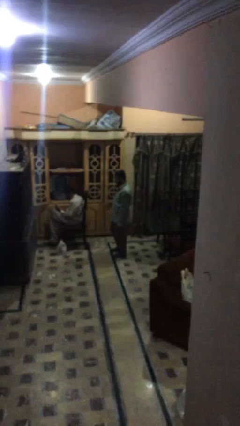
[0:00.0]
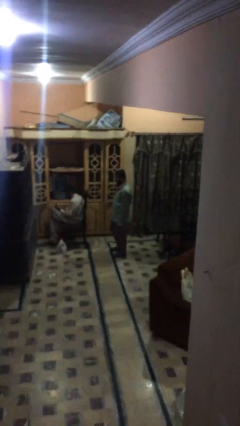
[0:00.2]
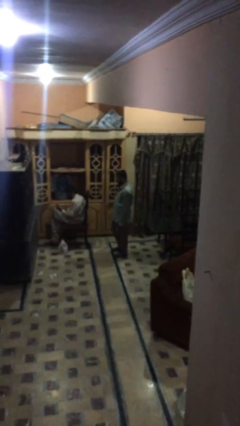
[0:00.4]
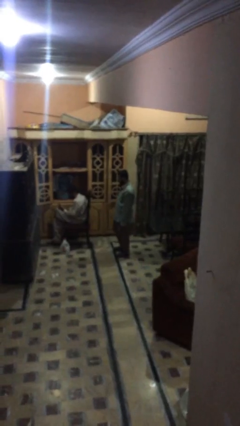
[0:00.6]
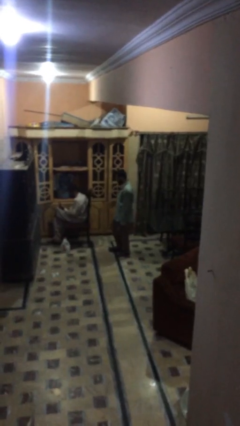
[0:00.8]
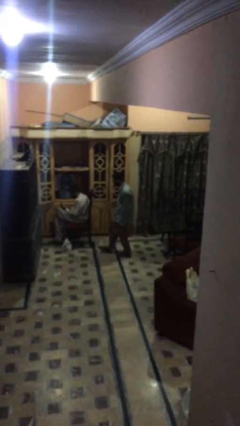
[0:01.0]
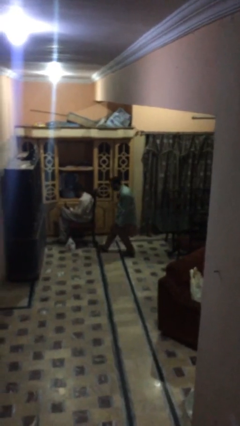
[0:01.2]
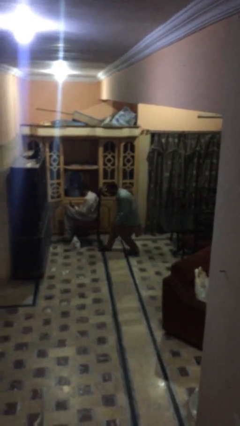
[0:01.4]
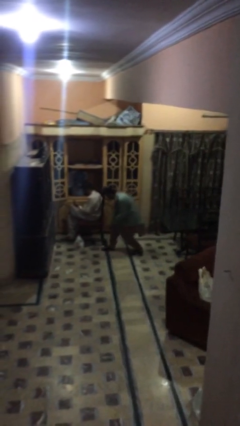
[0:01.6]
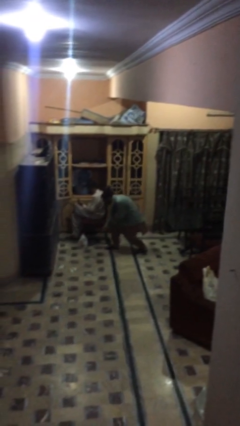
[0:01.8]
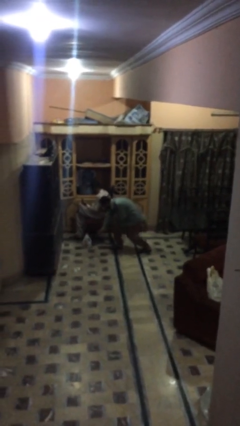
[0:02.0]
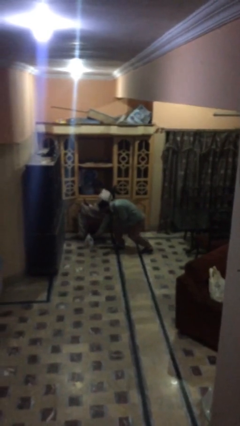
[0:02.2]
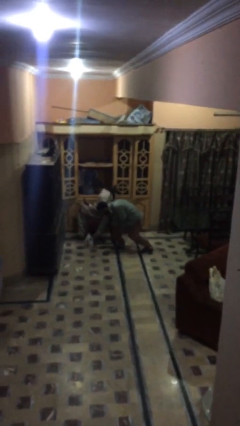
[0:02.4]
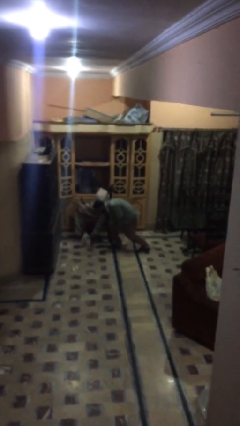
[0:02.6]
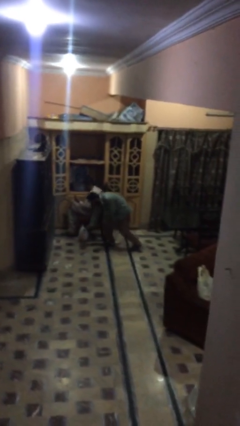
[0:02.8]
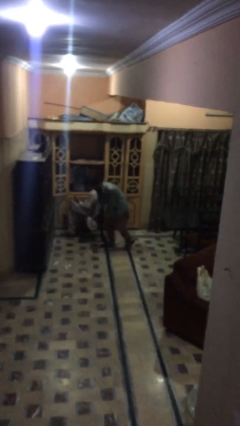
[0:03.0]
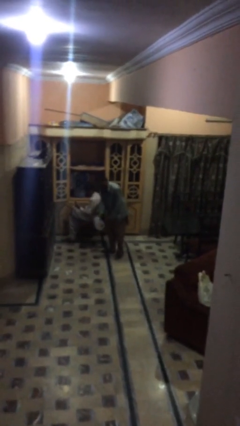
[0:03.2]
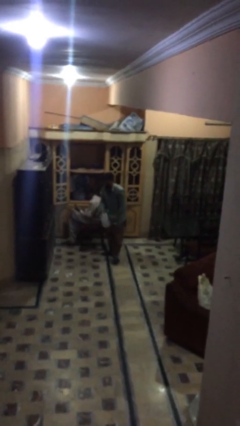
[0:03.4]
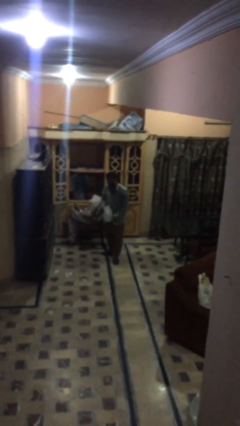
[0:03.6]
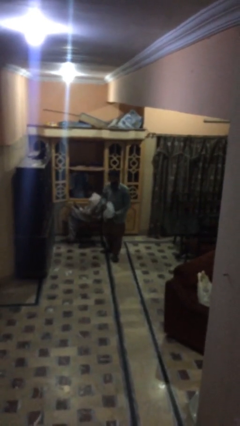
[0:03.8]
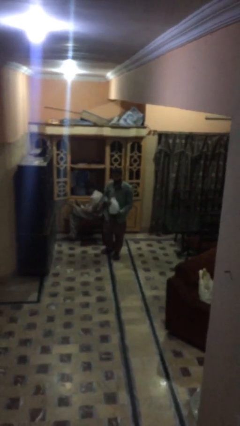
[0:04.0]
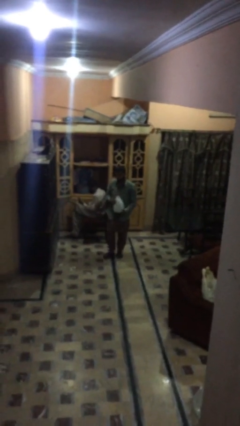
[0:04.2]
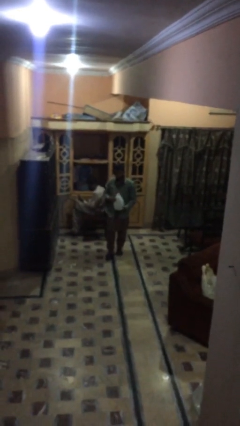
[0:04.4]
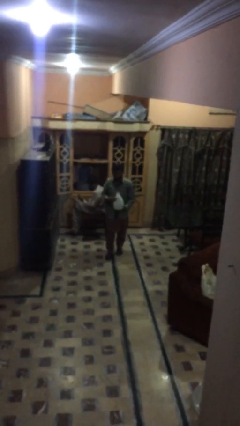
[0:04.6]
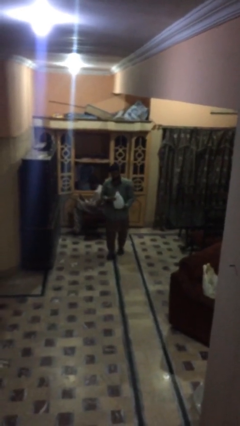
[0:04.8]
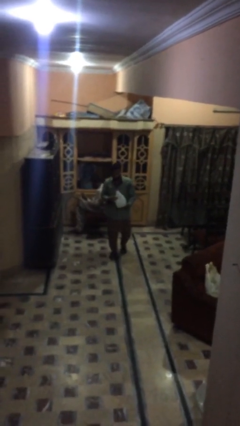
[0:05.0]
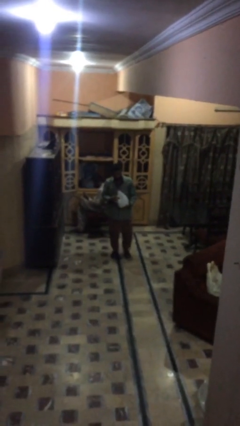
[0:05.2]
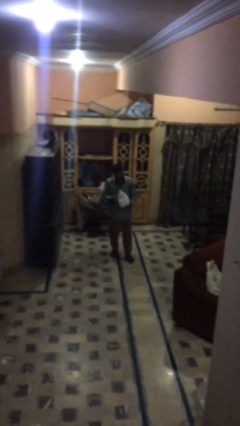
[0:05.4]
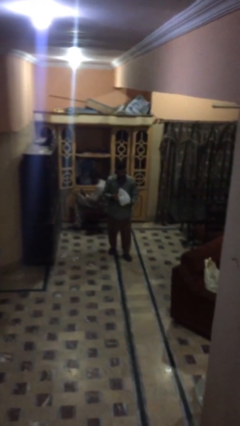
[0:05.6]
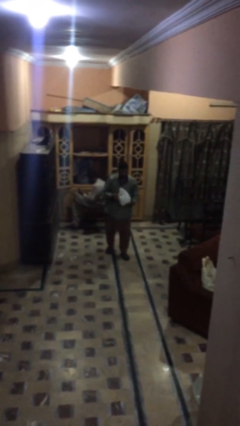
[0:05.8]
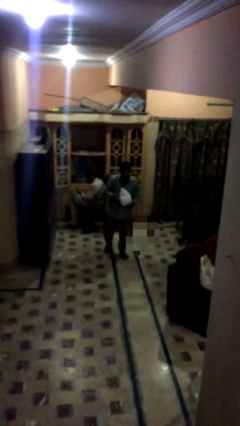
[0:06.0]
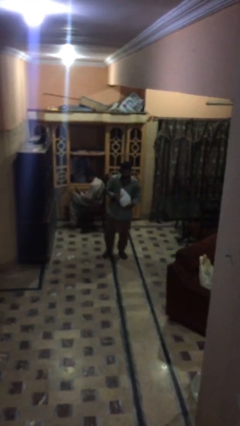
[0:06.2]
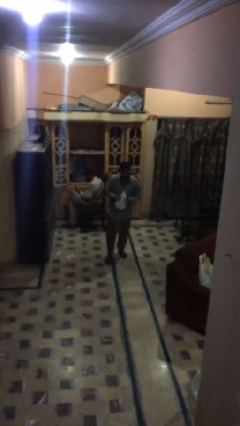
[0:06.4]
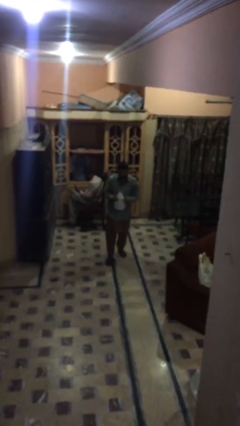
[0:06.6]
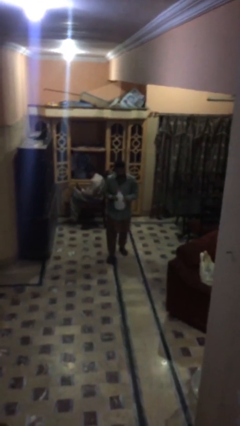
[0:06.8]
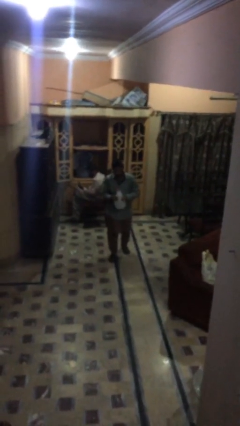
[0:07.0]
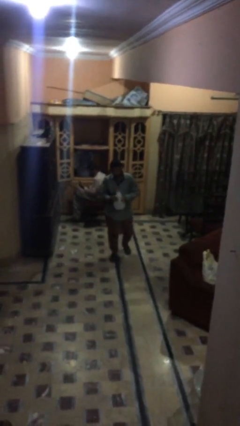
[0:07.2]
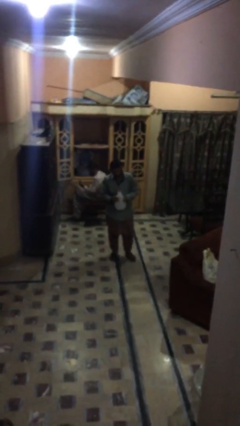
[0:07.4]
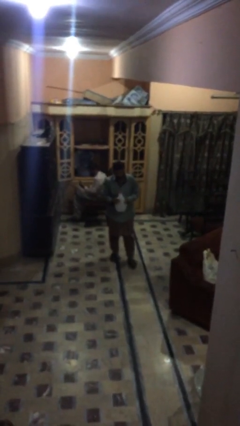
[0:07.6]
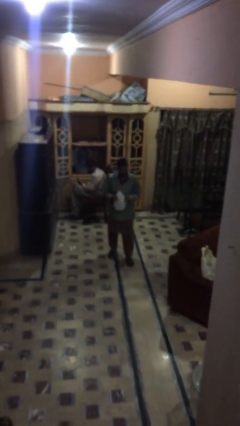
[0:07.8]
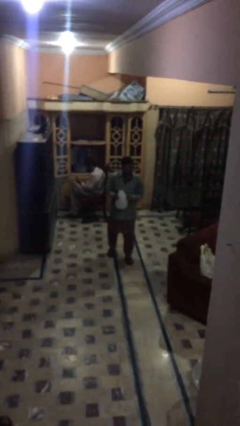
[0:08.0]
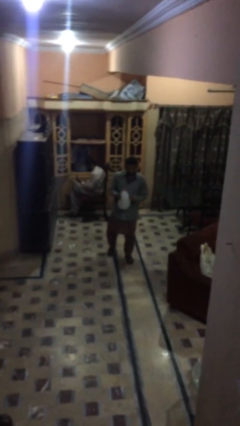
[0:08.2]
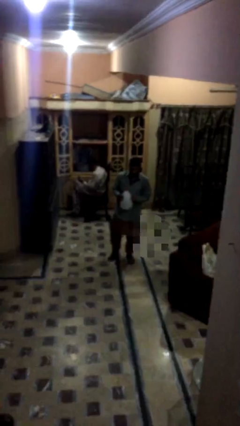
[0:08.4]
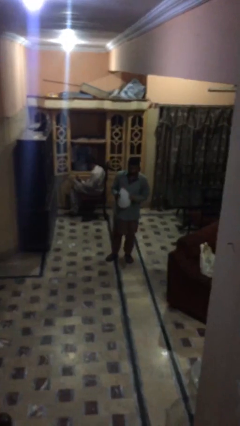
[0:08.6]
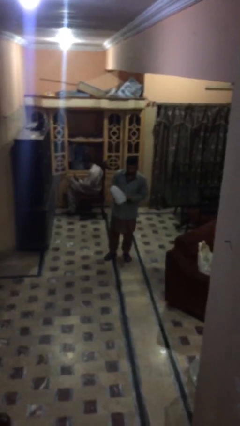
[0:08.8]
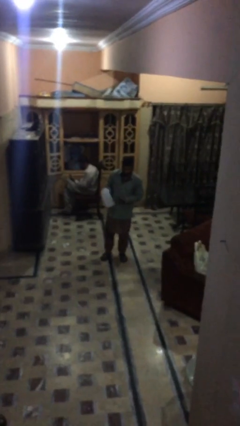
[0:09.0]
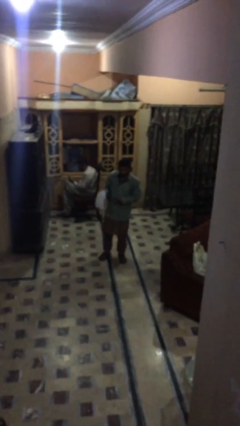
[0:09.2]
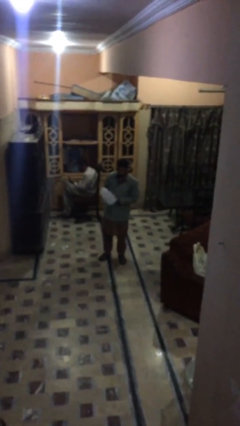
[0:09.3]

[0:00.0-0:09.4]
person steals object from person

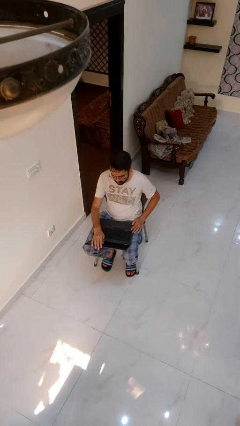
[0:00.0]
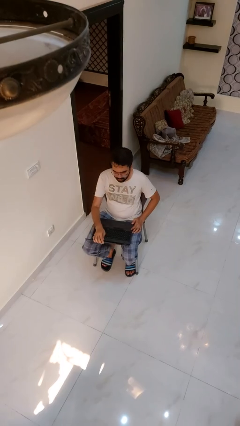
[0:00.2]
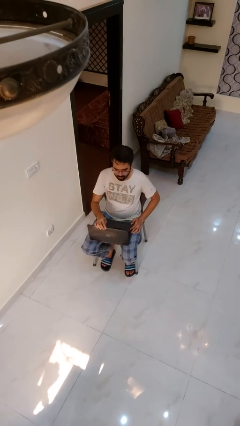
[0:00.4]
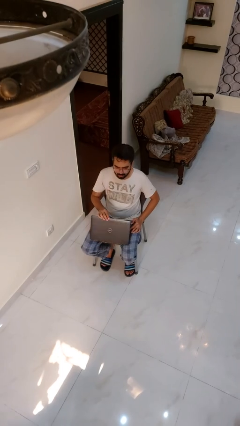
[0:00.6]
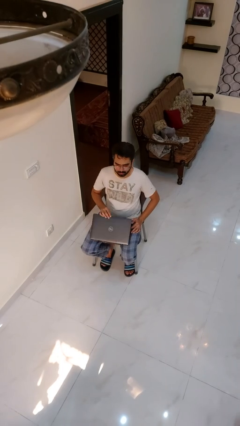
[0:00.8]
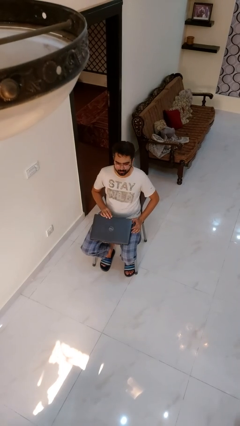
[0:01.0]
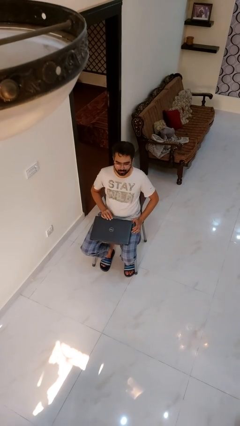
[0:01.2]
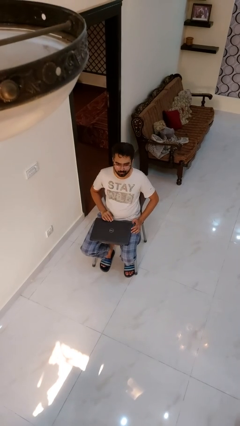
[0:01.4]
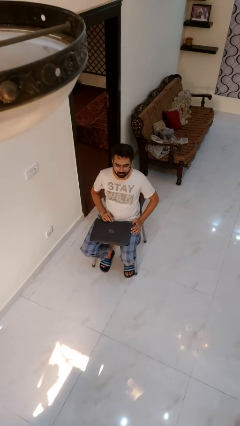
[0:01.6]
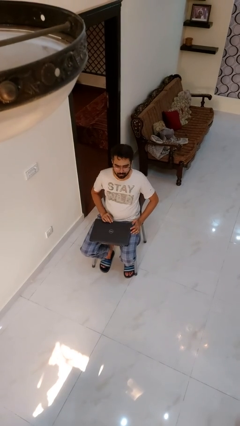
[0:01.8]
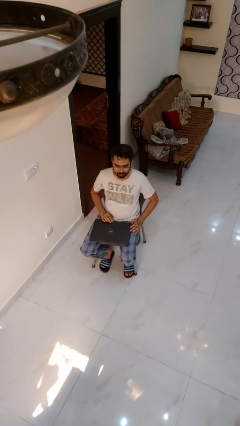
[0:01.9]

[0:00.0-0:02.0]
person closes laptop

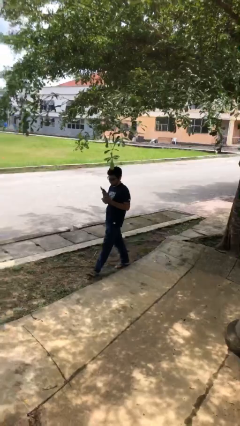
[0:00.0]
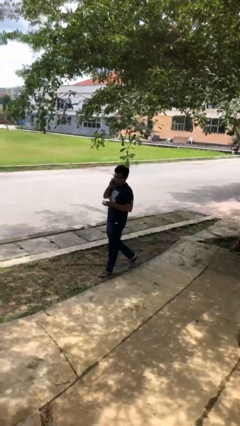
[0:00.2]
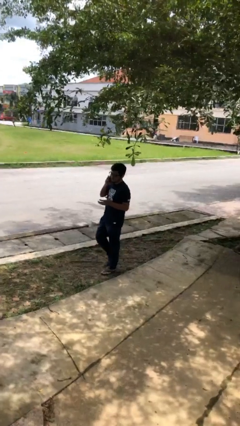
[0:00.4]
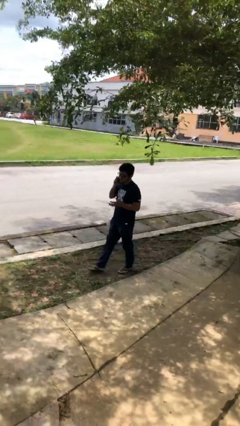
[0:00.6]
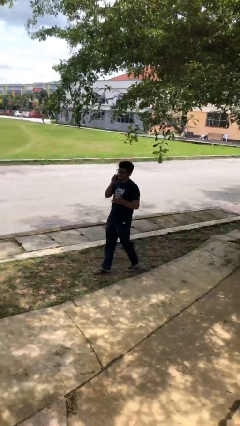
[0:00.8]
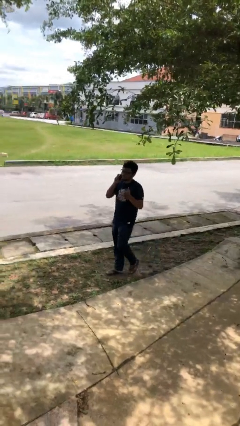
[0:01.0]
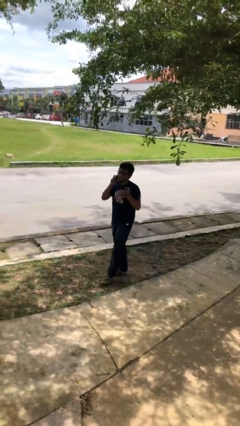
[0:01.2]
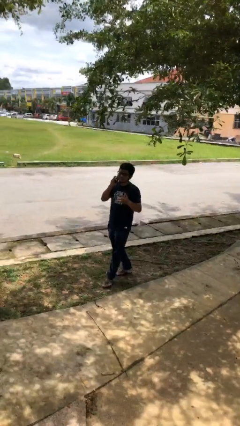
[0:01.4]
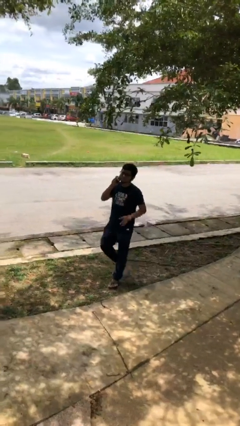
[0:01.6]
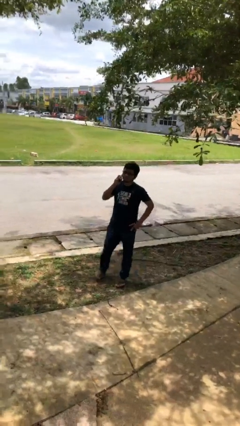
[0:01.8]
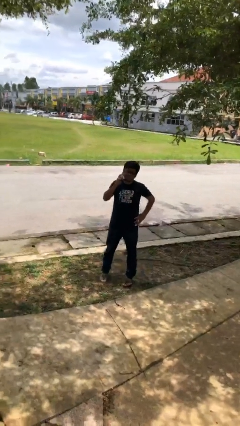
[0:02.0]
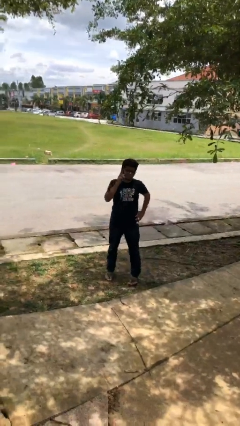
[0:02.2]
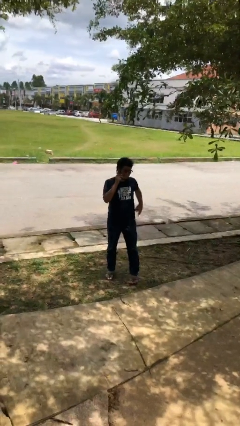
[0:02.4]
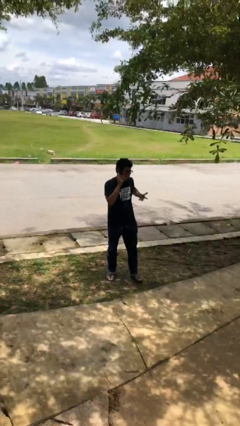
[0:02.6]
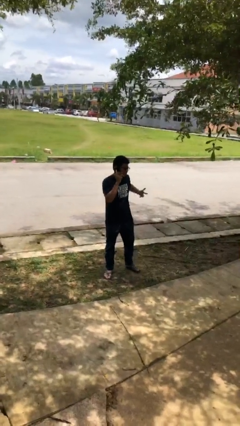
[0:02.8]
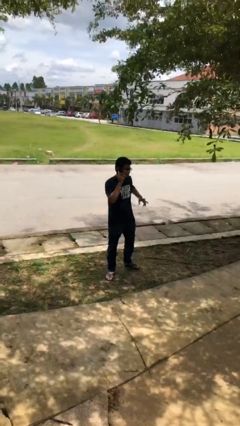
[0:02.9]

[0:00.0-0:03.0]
person talks on phone

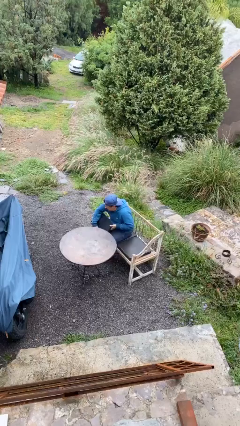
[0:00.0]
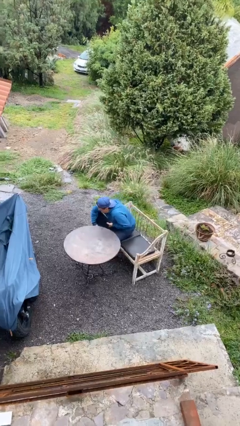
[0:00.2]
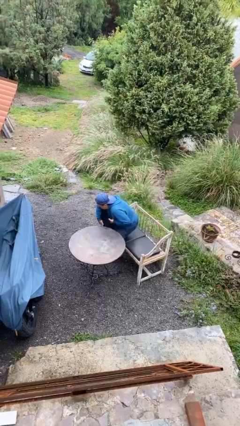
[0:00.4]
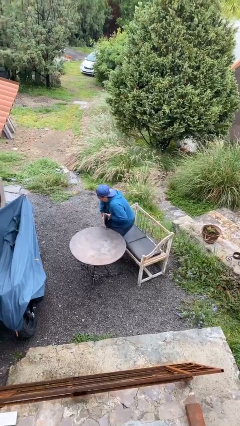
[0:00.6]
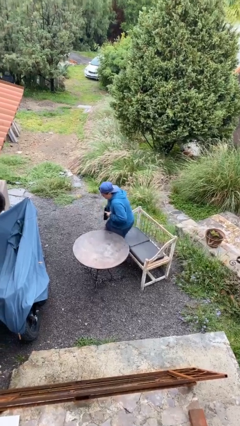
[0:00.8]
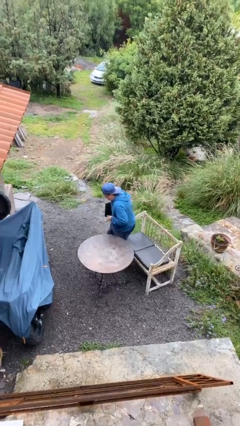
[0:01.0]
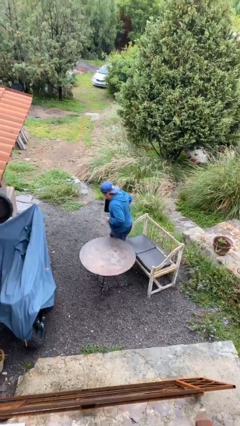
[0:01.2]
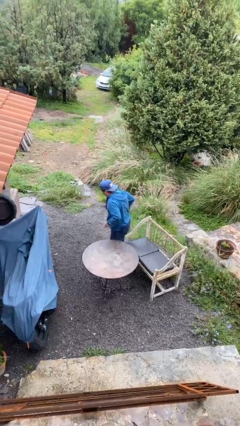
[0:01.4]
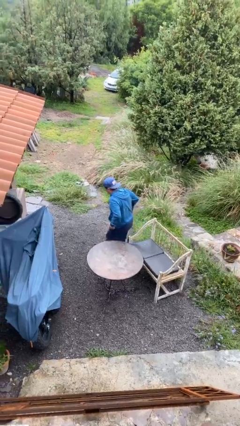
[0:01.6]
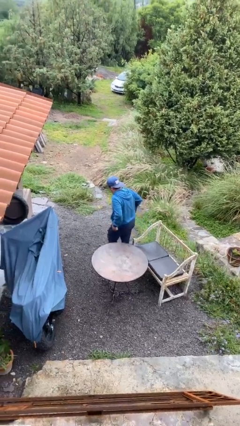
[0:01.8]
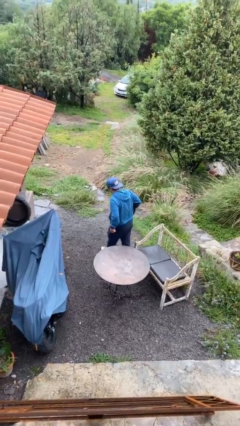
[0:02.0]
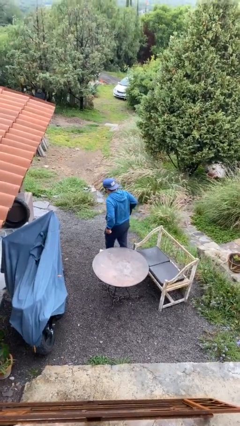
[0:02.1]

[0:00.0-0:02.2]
person stands up

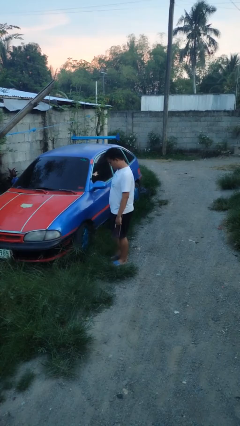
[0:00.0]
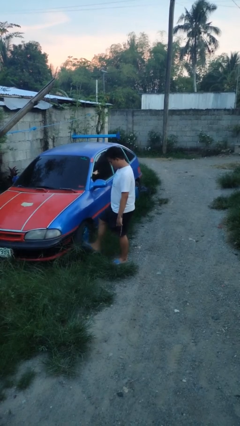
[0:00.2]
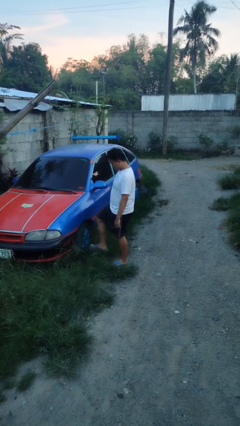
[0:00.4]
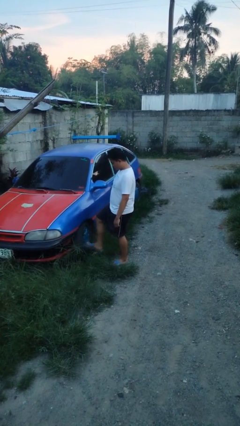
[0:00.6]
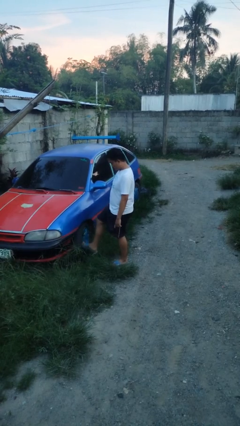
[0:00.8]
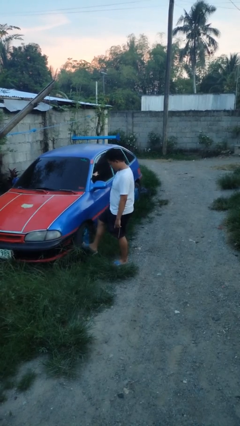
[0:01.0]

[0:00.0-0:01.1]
person kicks car tires
